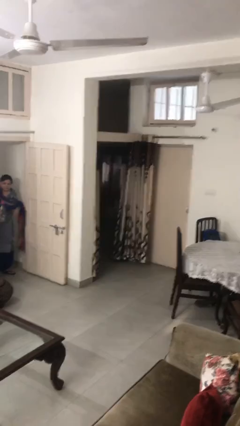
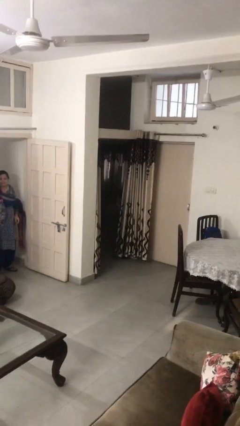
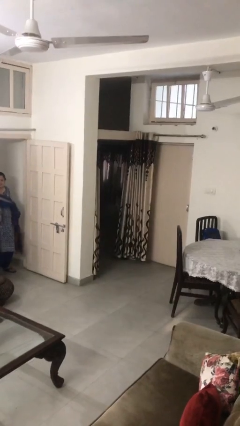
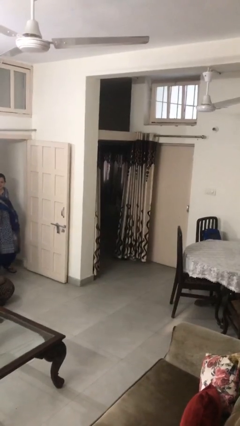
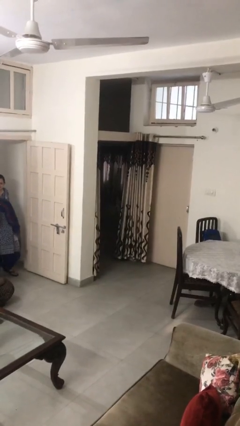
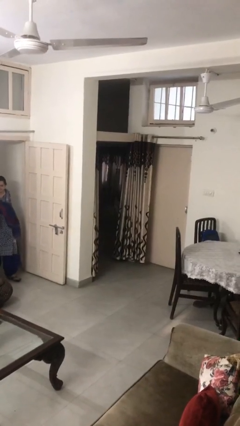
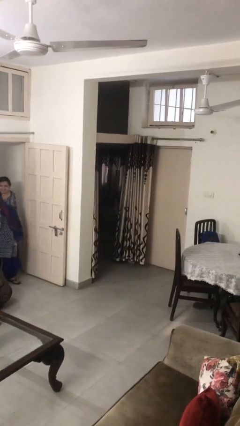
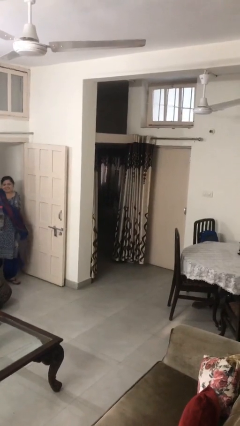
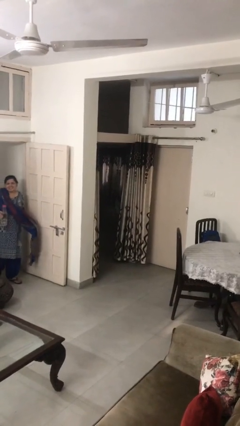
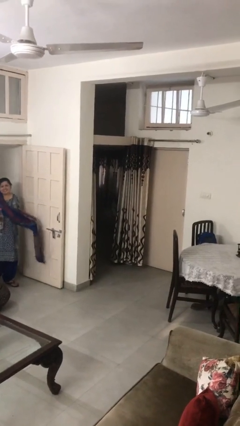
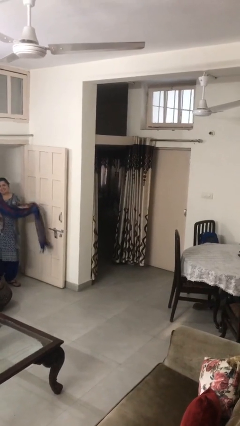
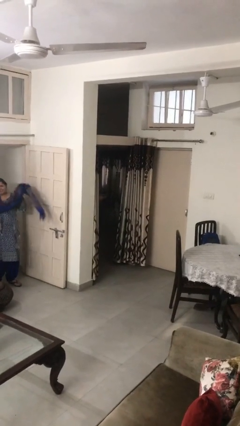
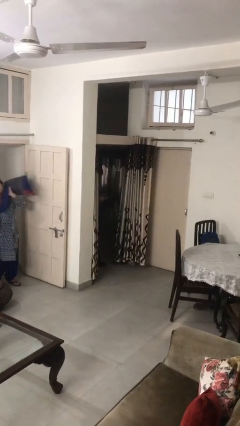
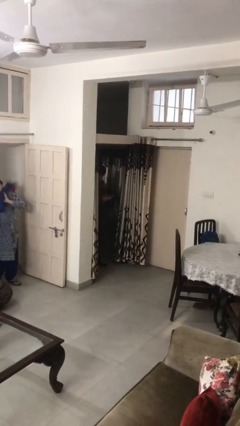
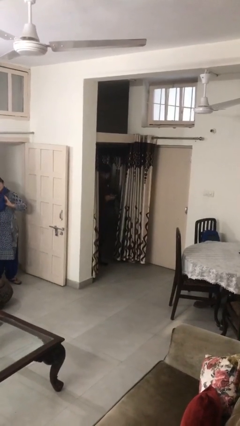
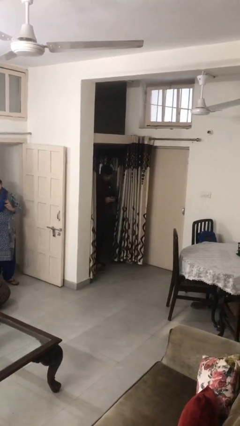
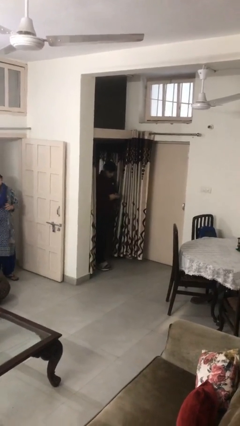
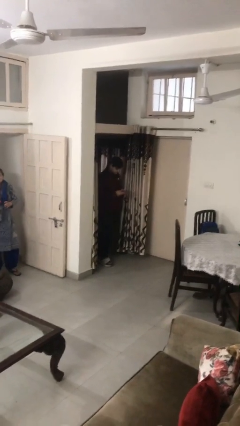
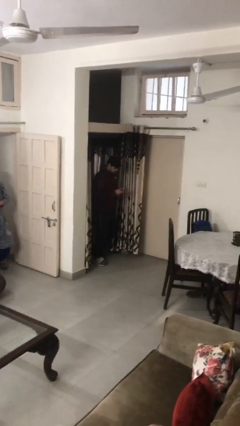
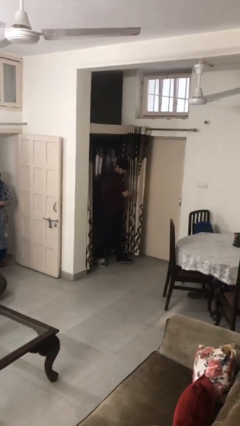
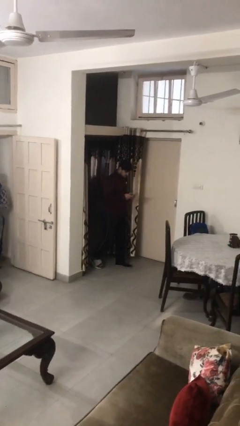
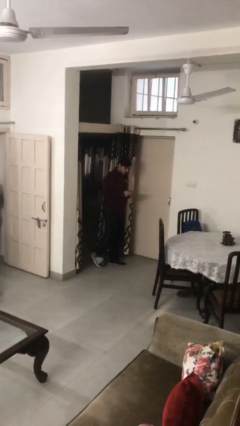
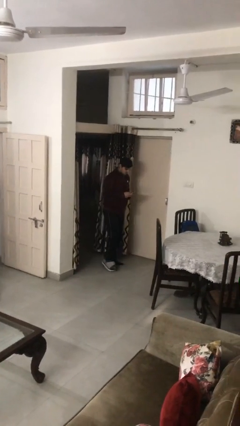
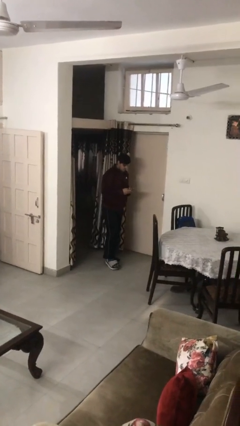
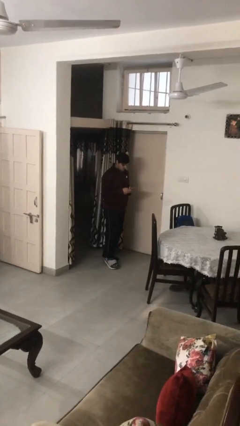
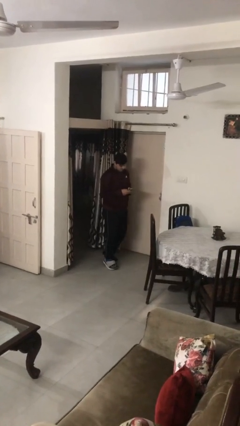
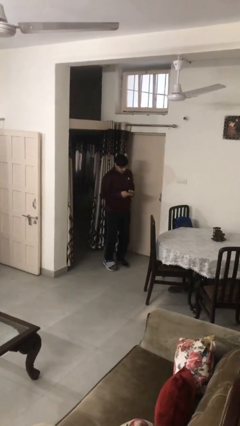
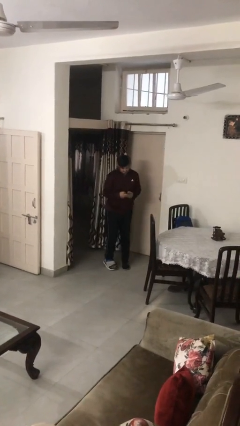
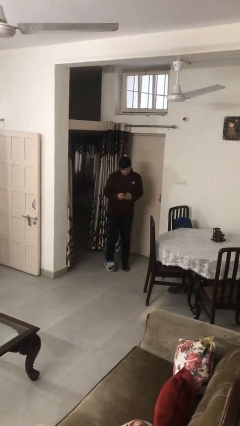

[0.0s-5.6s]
person enters scene through structure

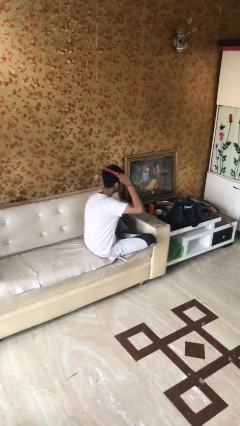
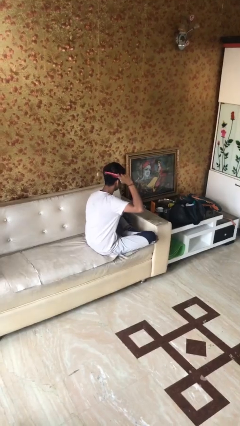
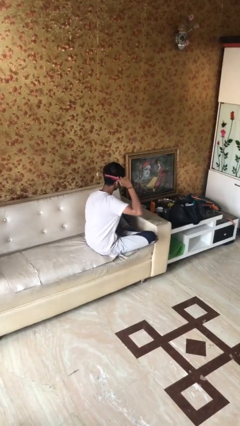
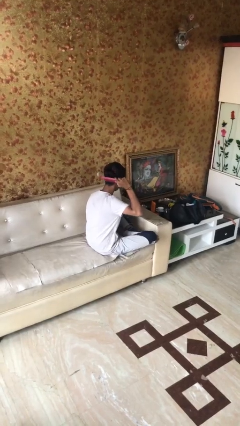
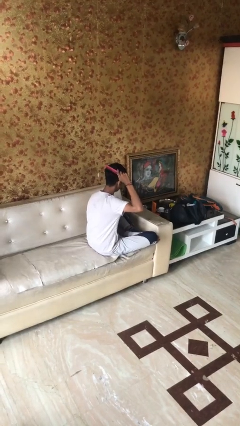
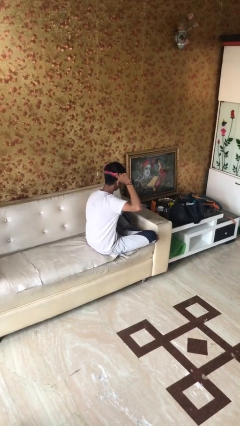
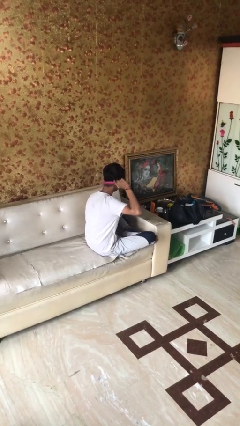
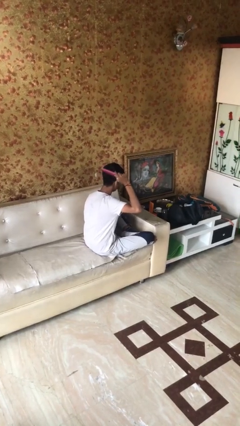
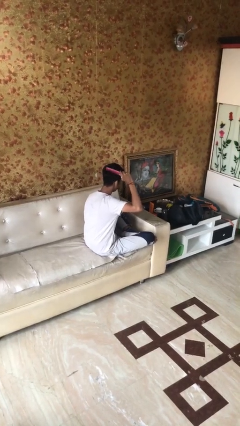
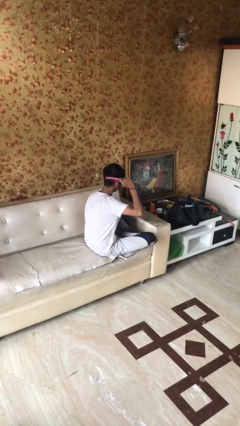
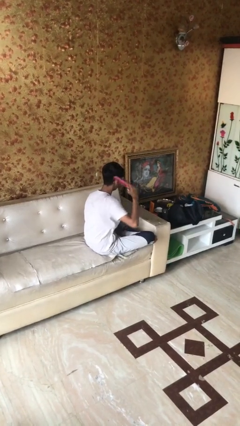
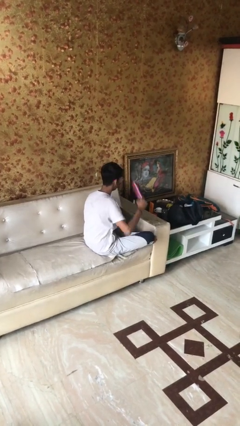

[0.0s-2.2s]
person brushes hair

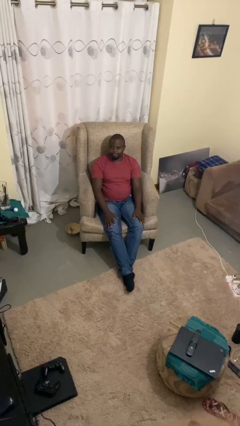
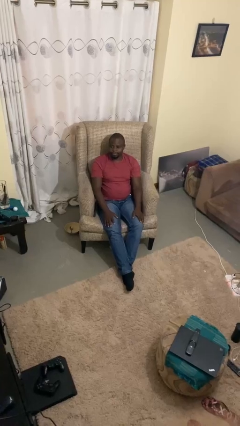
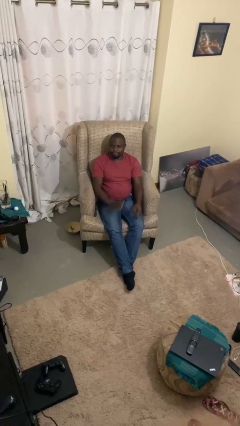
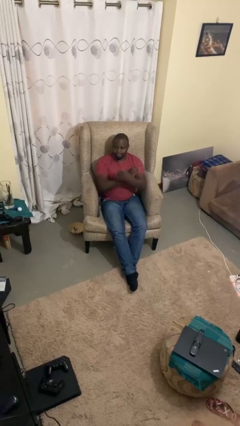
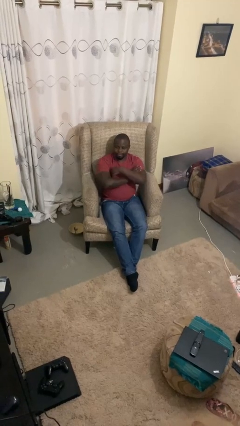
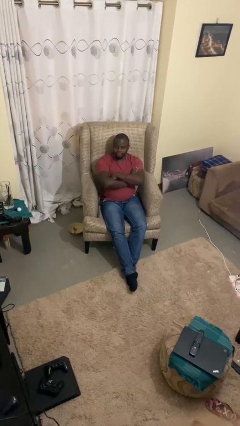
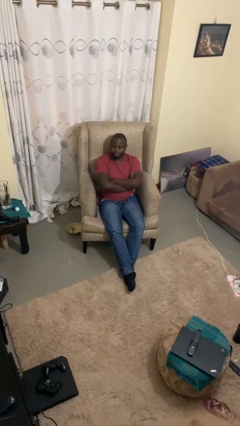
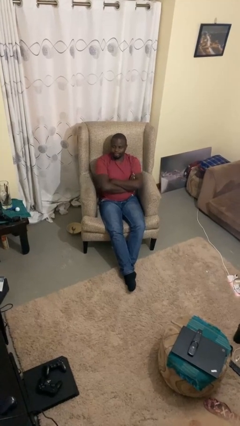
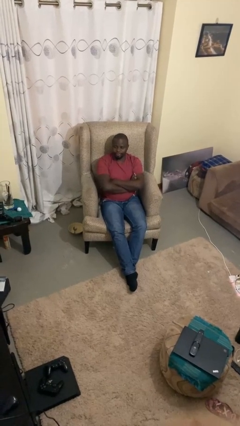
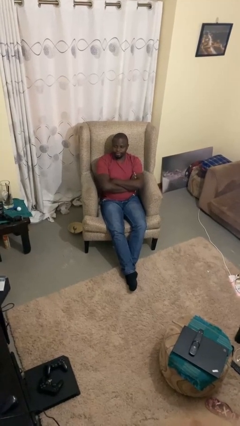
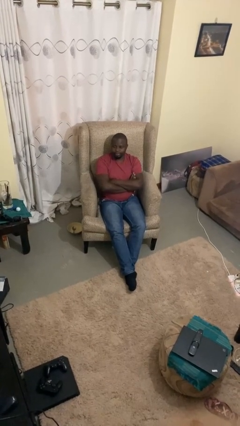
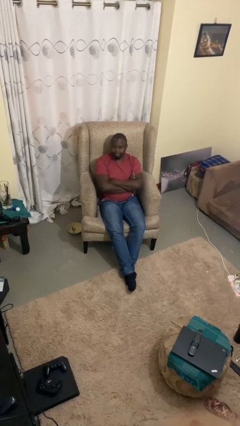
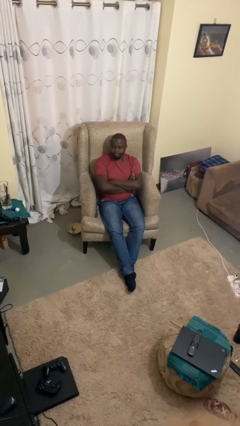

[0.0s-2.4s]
person crosses arms

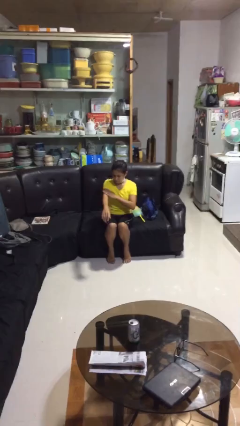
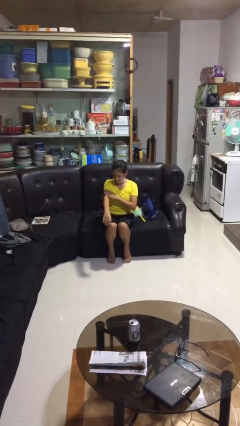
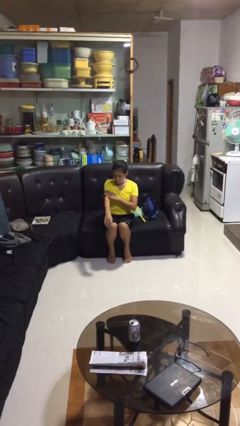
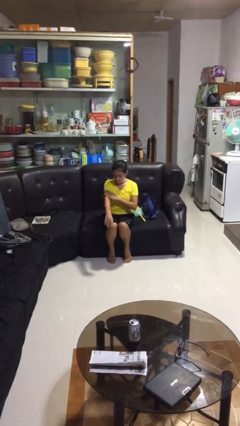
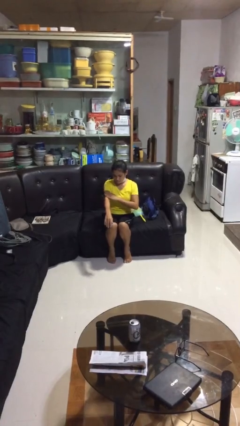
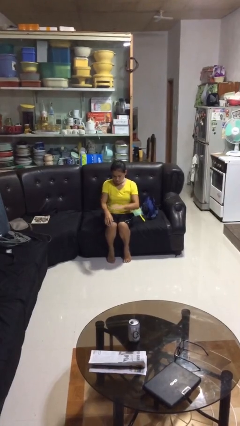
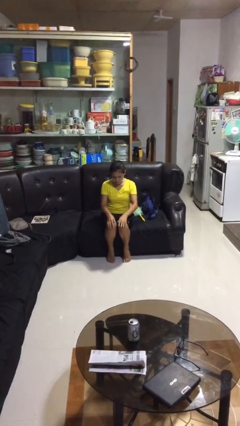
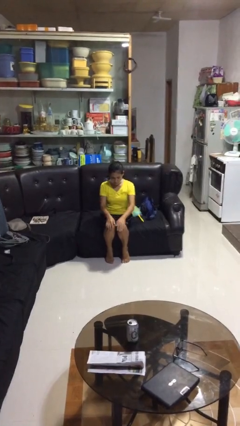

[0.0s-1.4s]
person swats bug

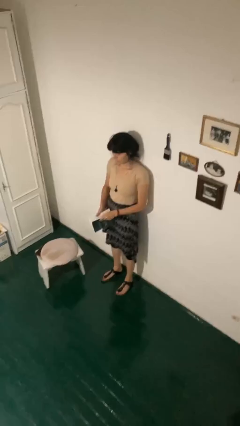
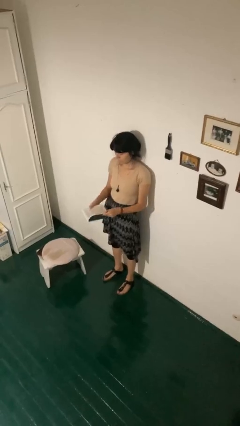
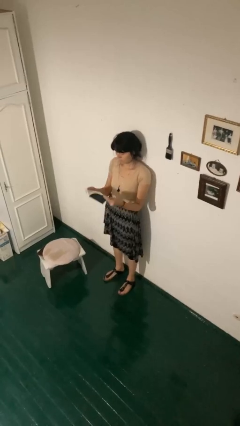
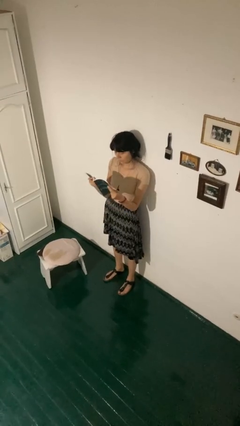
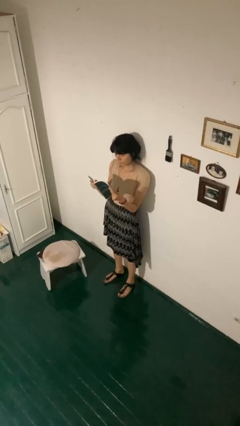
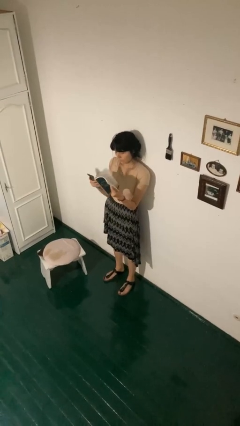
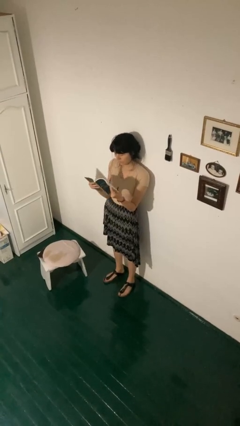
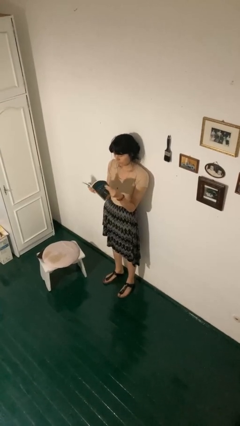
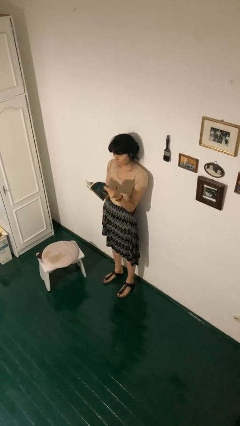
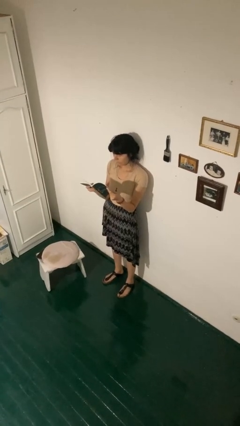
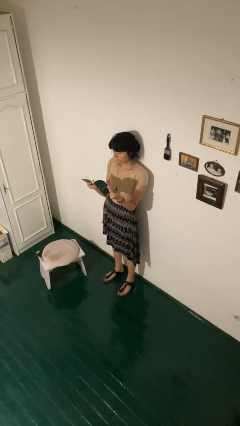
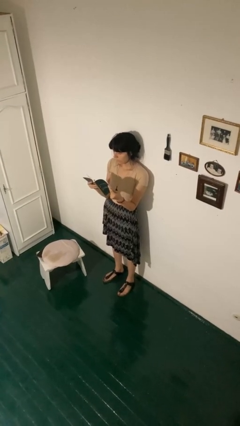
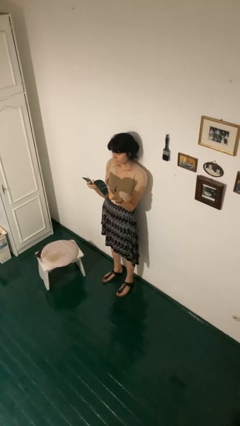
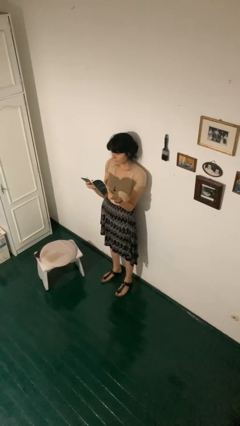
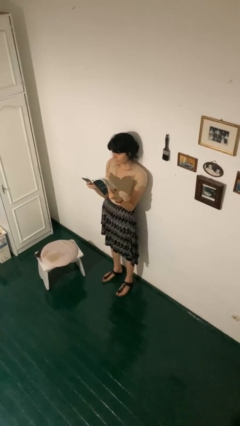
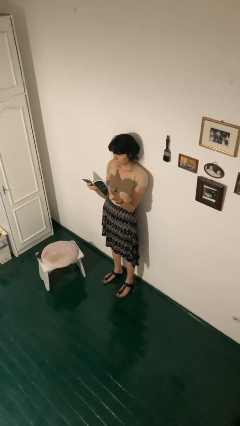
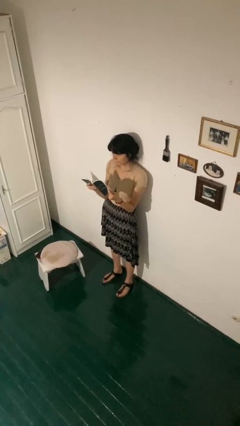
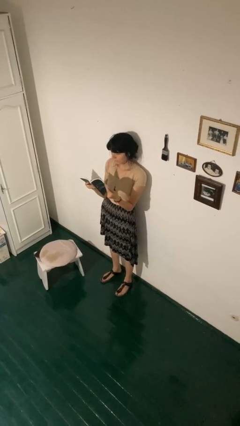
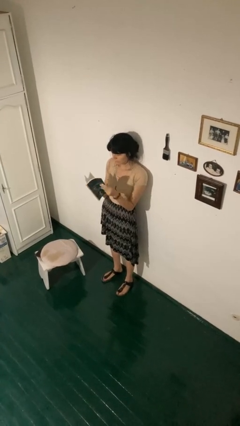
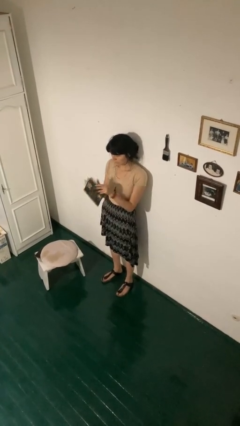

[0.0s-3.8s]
person reads book

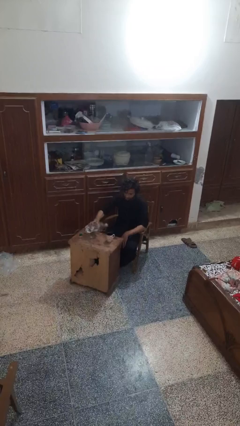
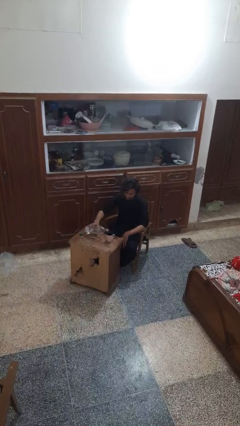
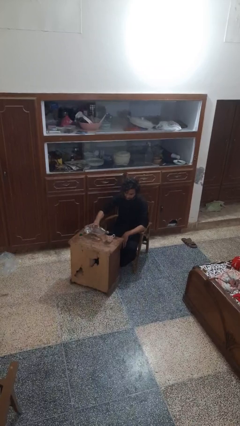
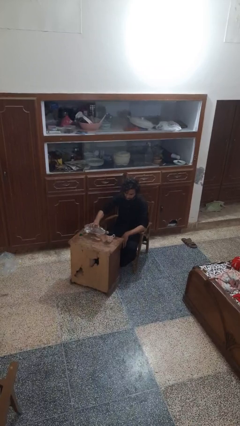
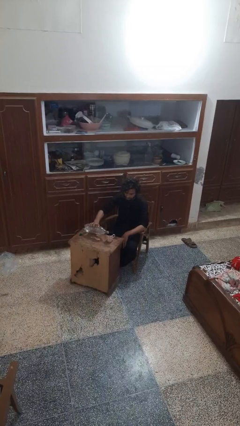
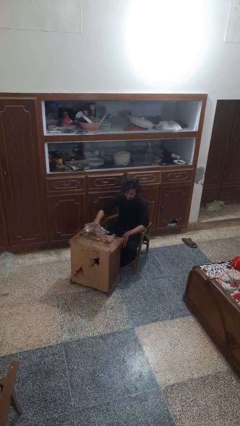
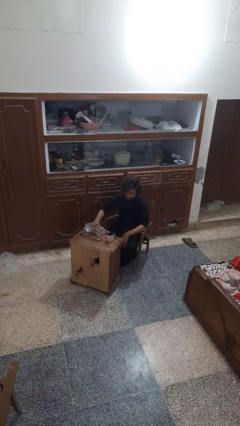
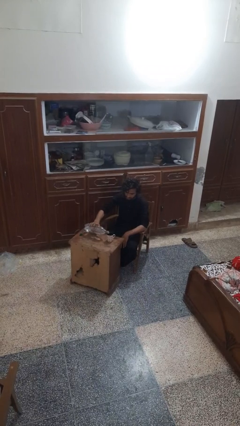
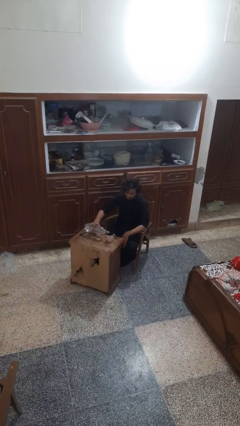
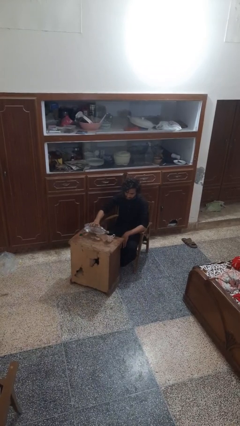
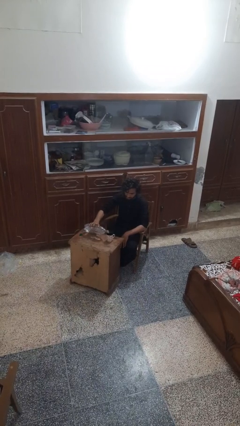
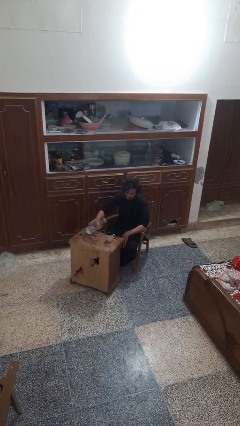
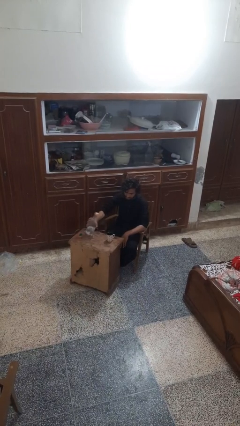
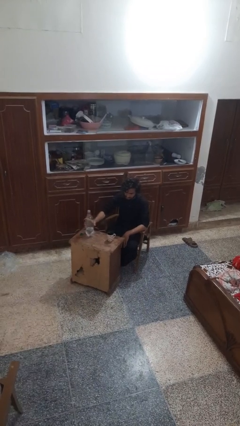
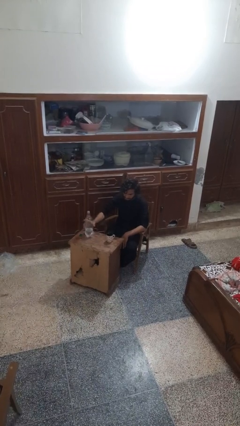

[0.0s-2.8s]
person pours liquid into cup
